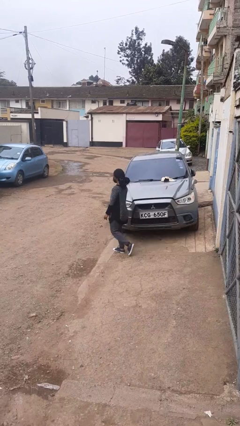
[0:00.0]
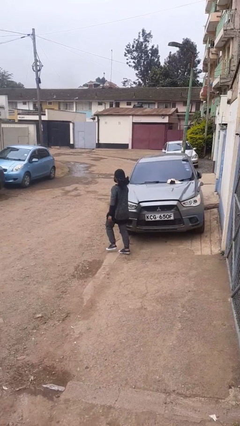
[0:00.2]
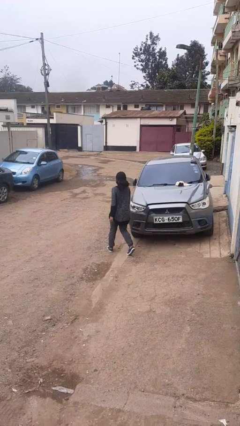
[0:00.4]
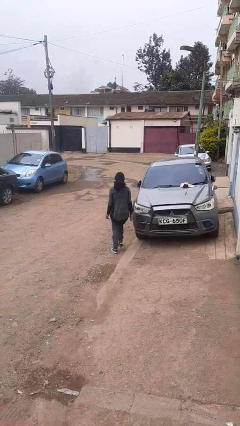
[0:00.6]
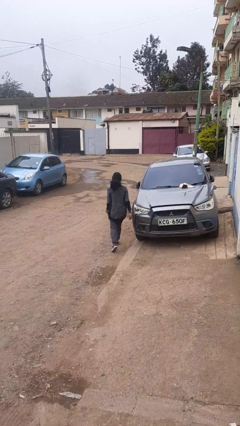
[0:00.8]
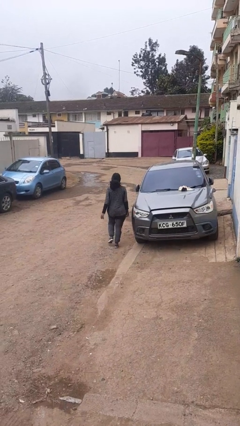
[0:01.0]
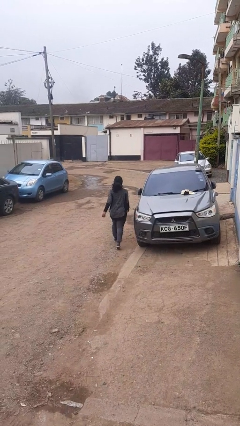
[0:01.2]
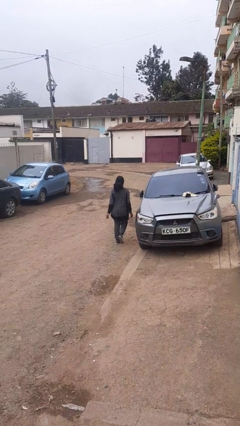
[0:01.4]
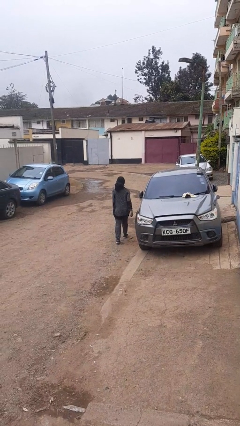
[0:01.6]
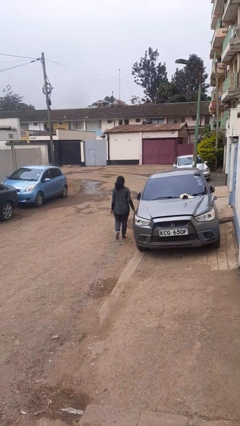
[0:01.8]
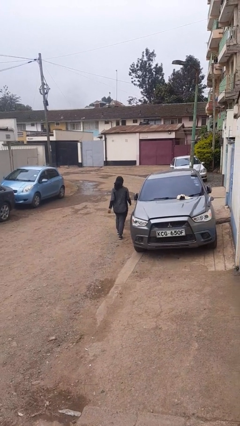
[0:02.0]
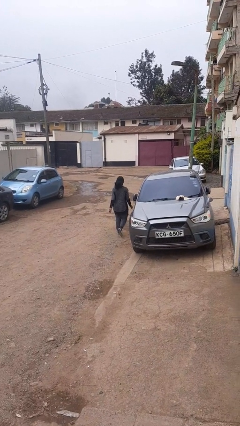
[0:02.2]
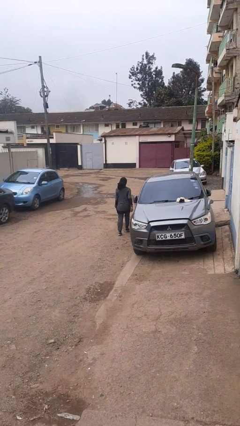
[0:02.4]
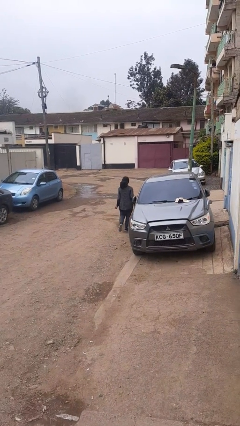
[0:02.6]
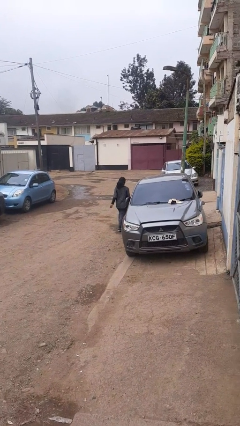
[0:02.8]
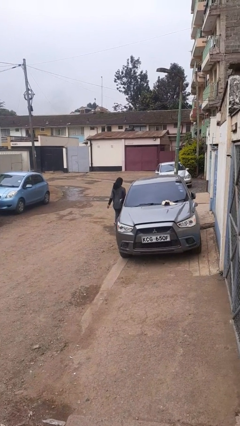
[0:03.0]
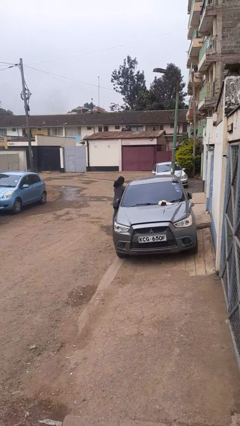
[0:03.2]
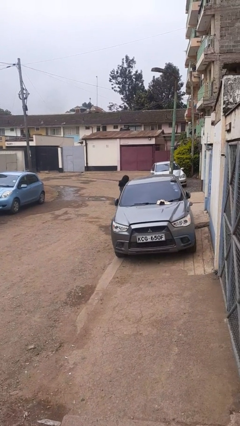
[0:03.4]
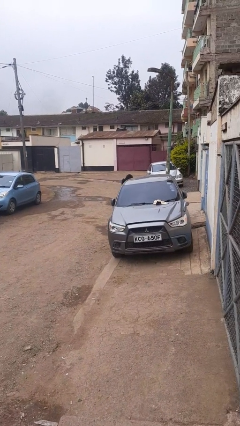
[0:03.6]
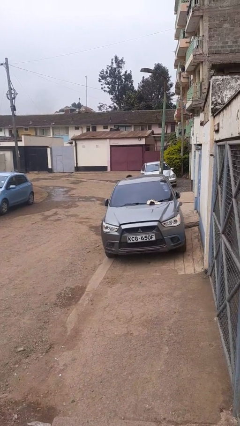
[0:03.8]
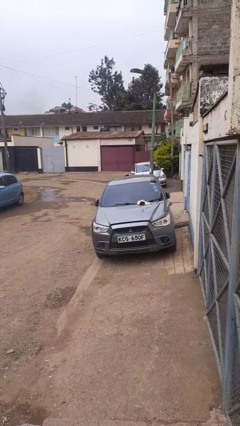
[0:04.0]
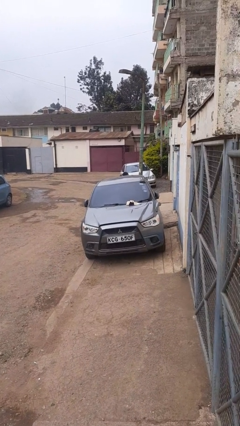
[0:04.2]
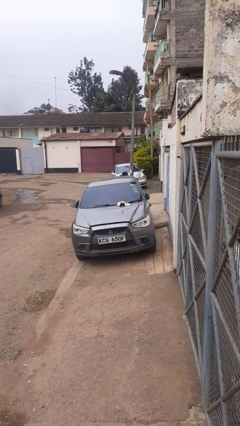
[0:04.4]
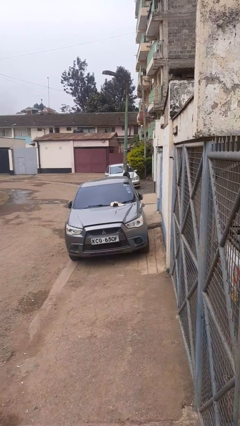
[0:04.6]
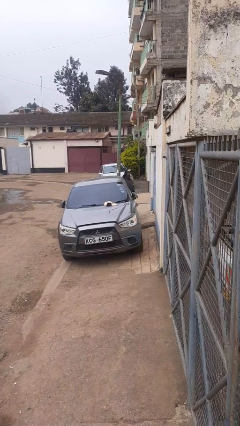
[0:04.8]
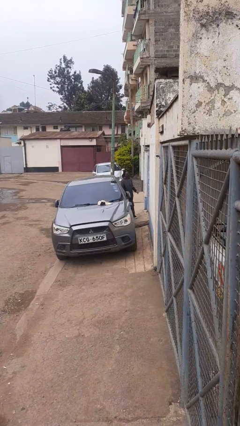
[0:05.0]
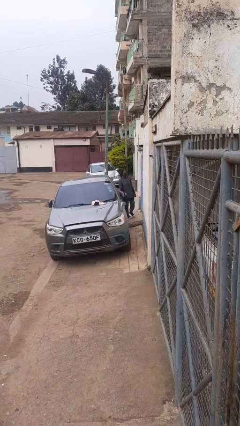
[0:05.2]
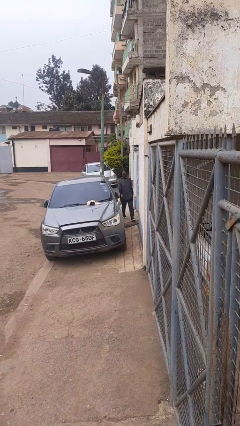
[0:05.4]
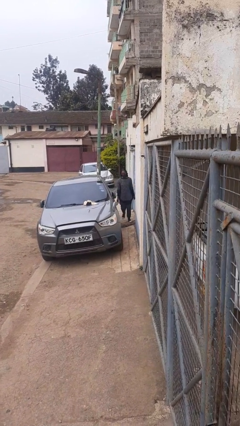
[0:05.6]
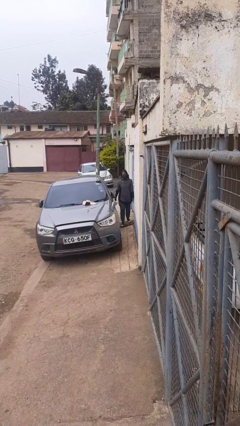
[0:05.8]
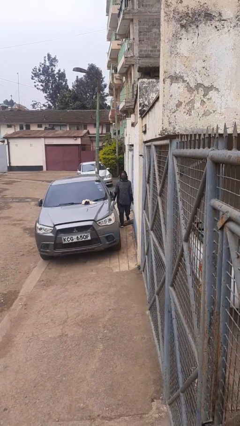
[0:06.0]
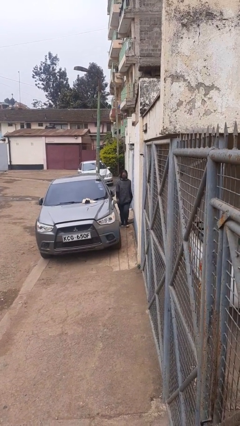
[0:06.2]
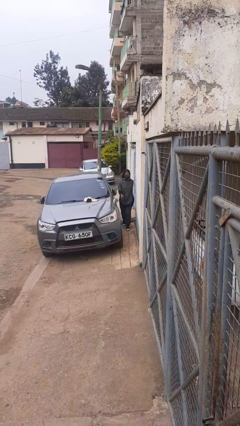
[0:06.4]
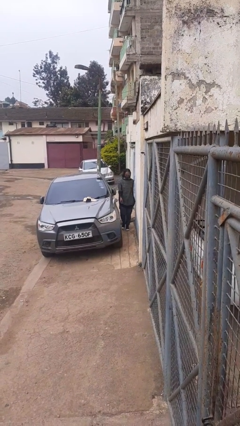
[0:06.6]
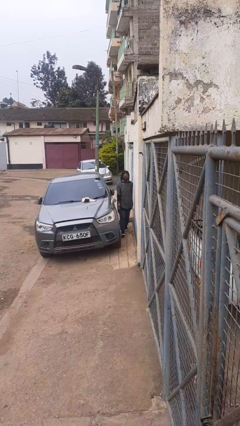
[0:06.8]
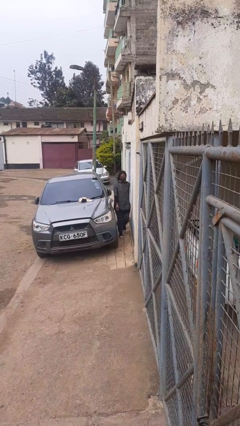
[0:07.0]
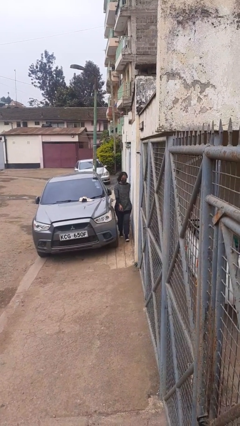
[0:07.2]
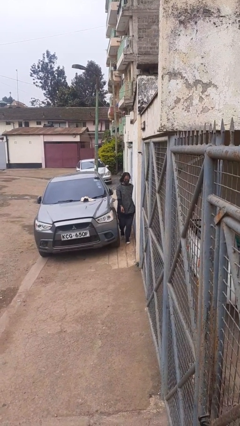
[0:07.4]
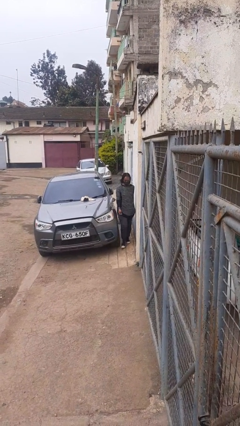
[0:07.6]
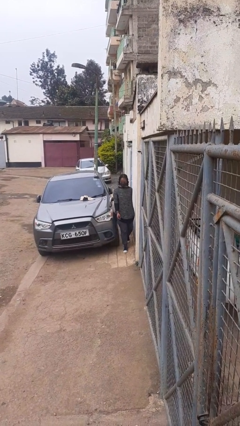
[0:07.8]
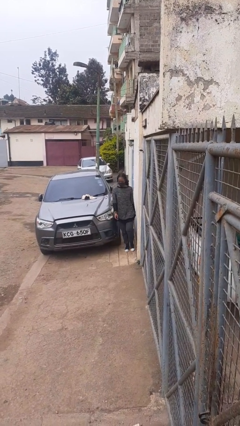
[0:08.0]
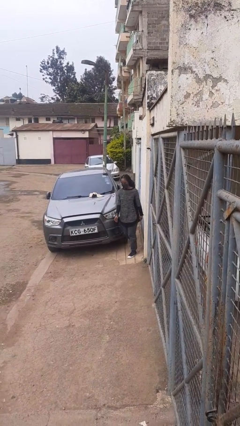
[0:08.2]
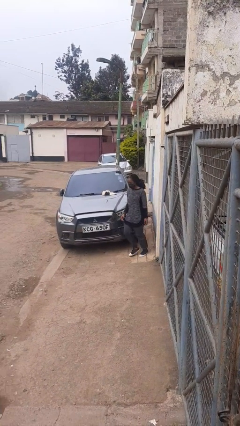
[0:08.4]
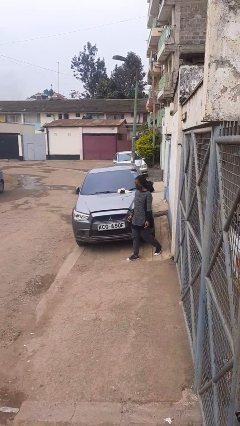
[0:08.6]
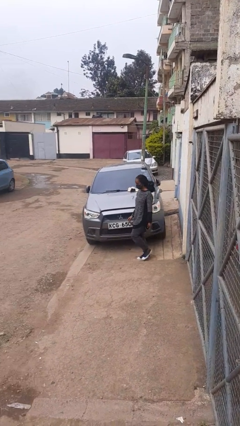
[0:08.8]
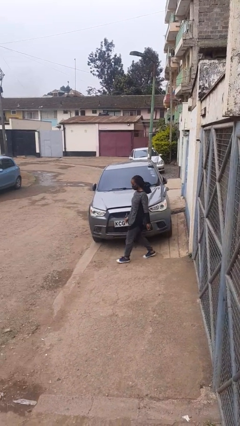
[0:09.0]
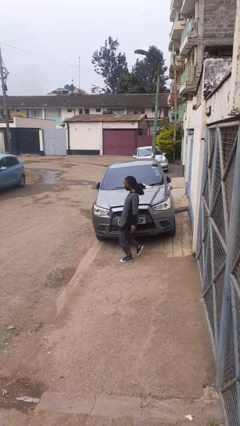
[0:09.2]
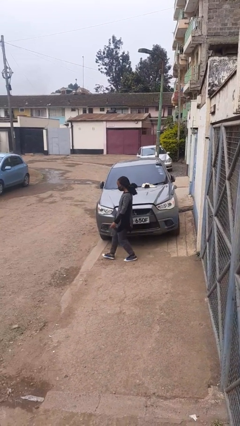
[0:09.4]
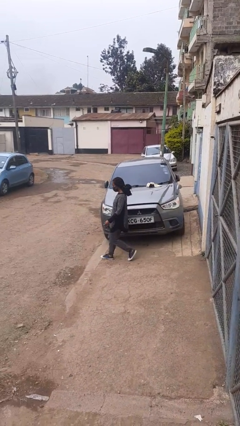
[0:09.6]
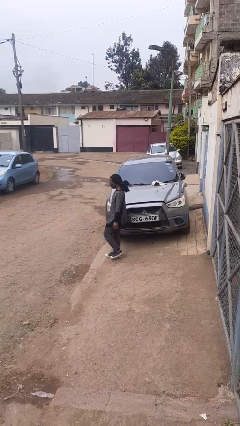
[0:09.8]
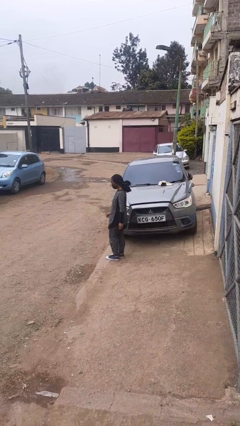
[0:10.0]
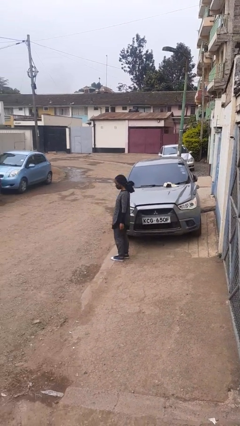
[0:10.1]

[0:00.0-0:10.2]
person walks around car

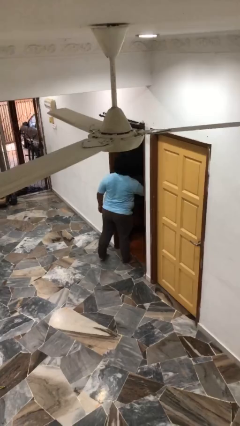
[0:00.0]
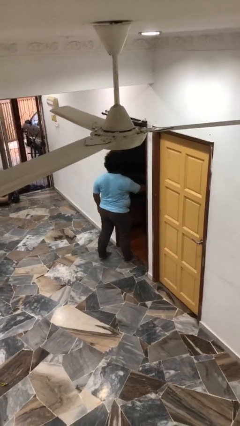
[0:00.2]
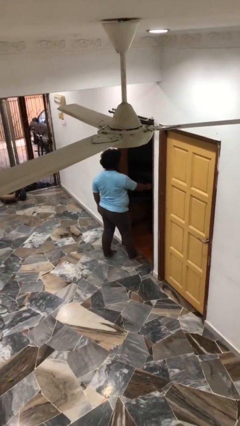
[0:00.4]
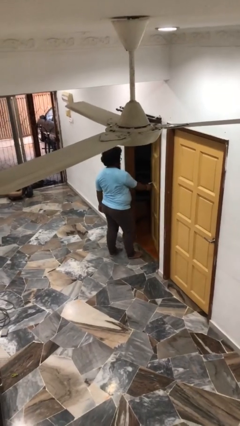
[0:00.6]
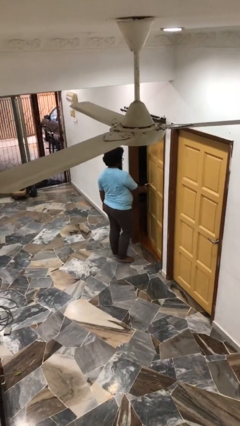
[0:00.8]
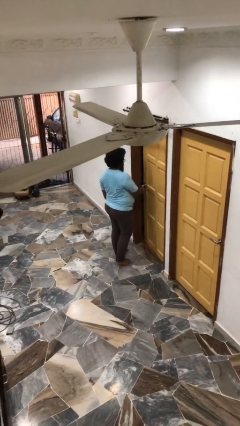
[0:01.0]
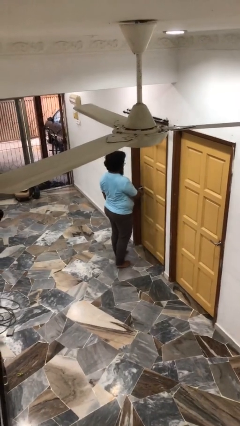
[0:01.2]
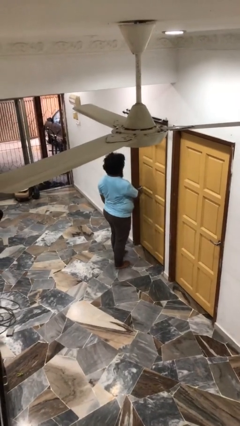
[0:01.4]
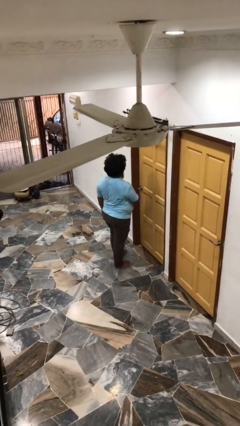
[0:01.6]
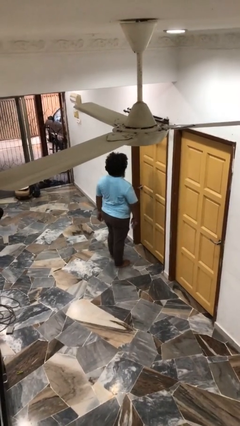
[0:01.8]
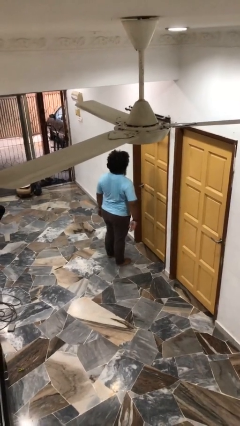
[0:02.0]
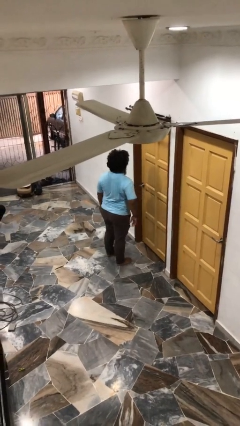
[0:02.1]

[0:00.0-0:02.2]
person closes facility door

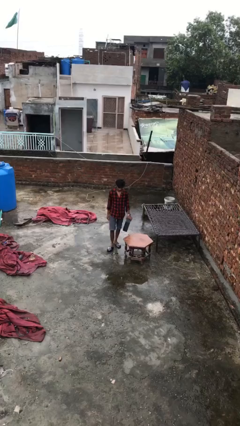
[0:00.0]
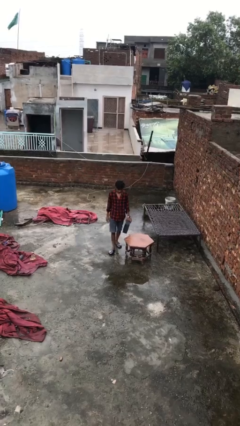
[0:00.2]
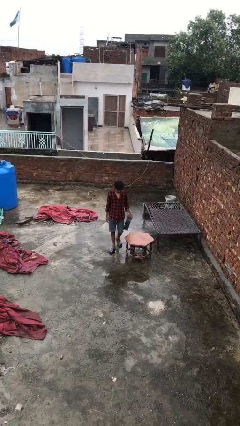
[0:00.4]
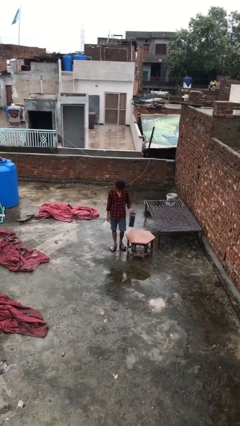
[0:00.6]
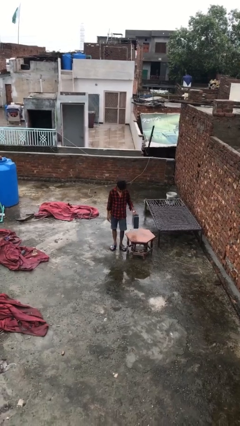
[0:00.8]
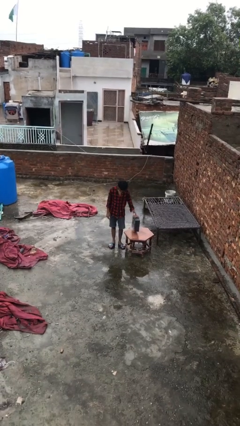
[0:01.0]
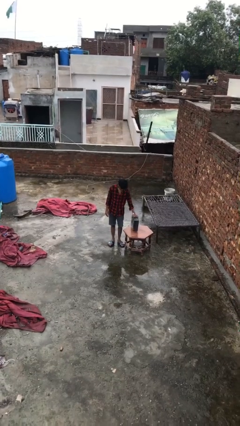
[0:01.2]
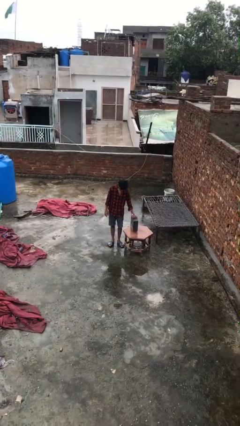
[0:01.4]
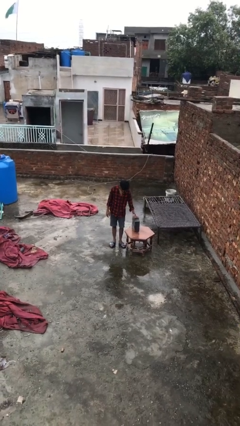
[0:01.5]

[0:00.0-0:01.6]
person puts down object on table

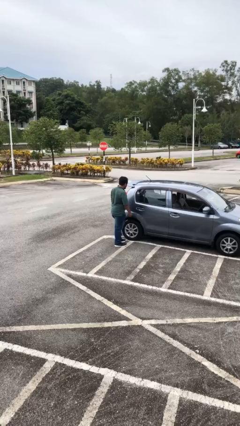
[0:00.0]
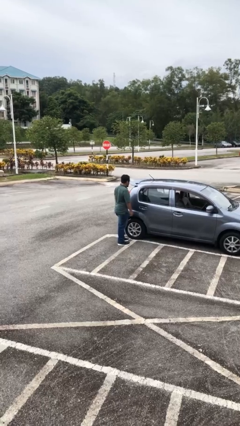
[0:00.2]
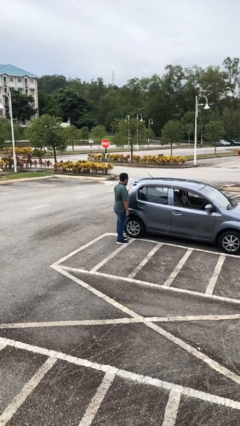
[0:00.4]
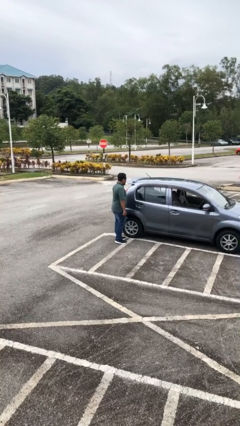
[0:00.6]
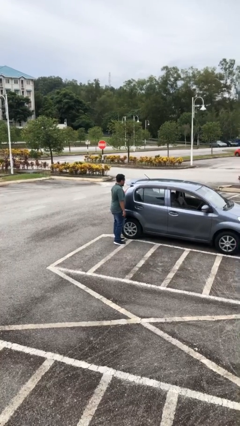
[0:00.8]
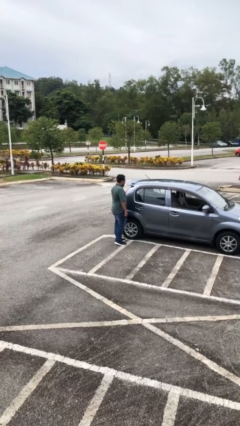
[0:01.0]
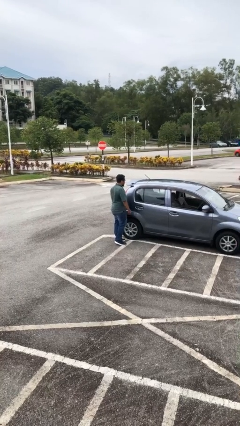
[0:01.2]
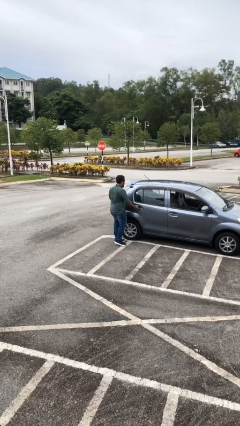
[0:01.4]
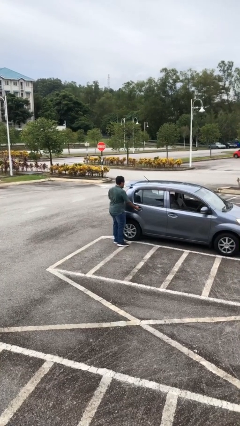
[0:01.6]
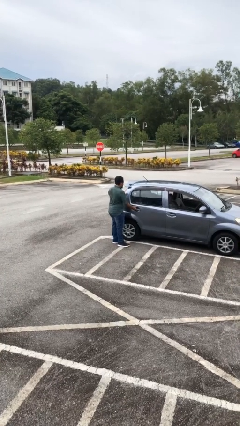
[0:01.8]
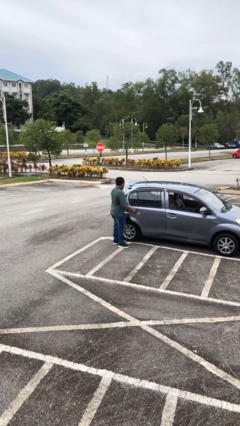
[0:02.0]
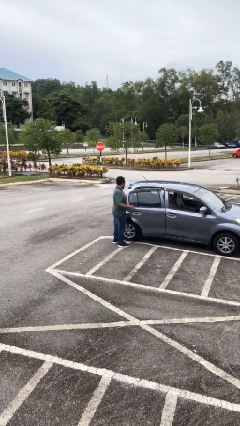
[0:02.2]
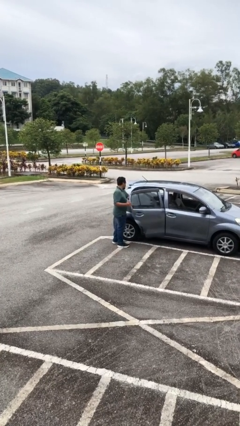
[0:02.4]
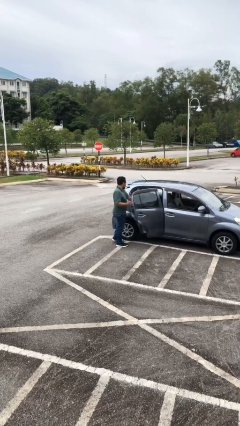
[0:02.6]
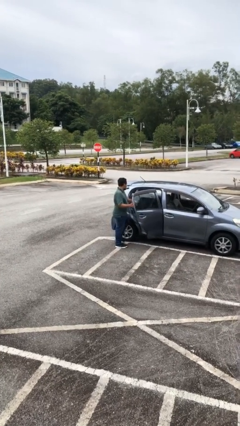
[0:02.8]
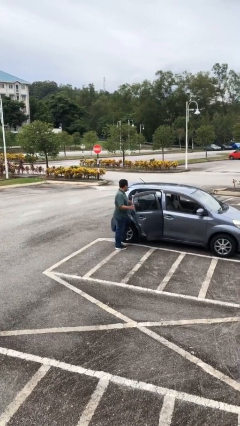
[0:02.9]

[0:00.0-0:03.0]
person opens car door

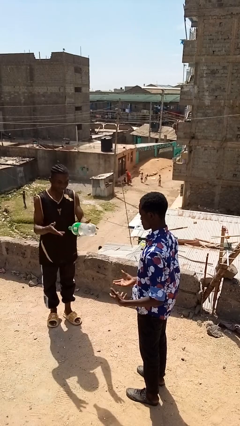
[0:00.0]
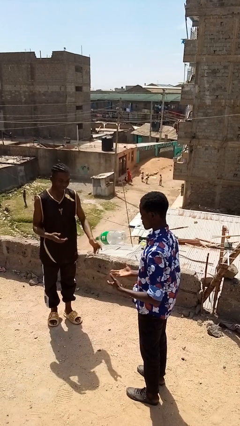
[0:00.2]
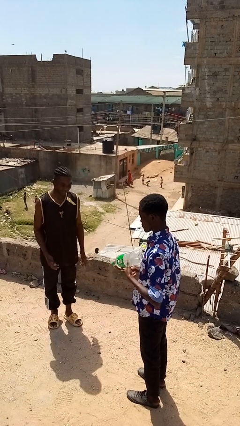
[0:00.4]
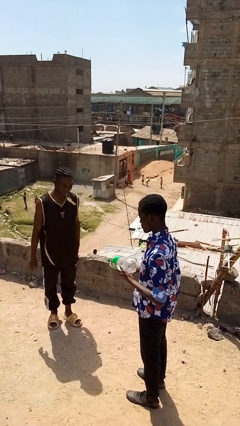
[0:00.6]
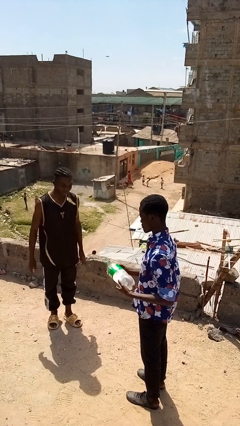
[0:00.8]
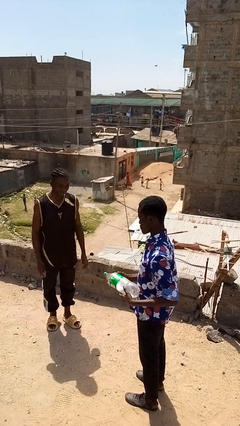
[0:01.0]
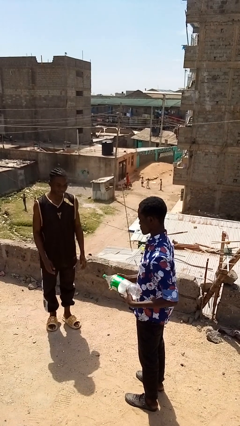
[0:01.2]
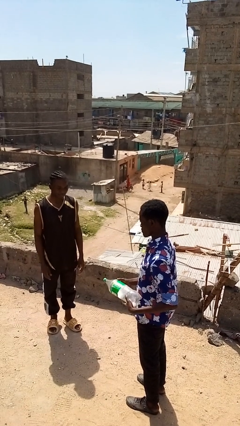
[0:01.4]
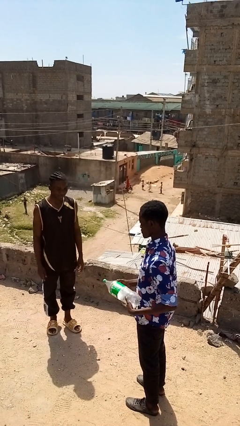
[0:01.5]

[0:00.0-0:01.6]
person catches object from person
